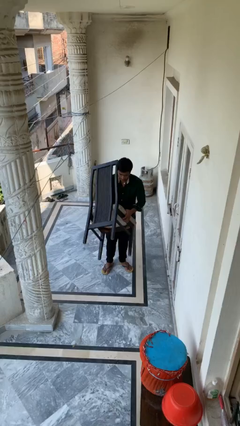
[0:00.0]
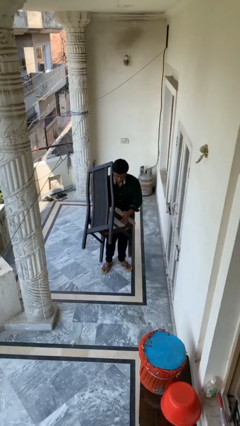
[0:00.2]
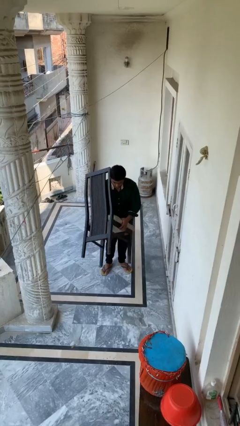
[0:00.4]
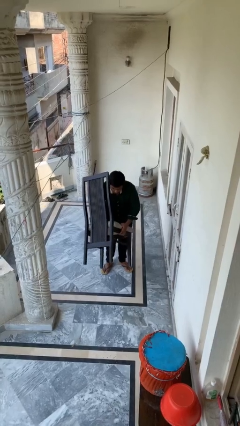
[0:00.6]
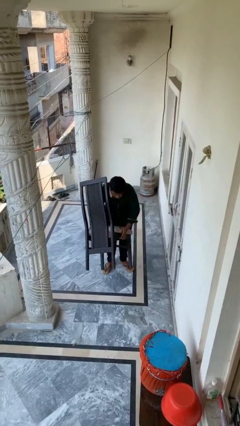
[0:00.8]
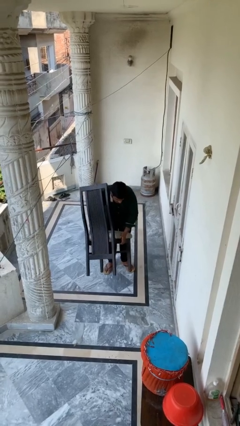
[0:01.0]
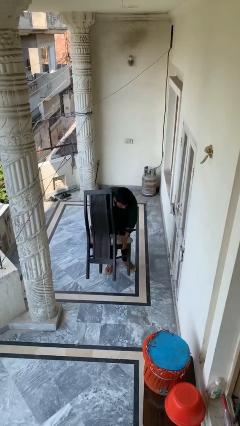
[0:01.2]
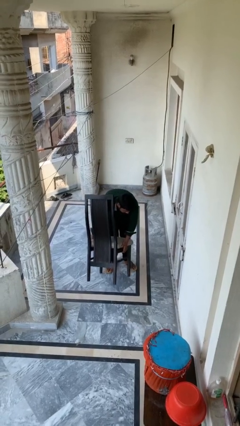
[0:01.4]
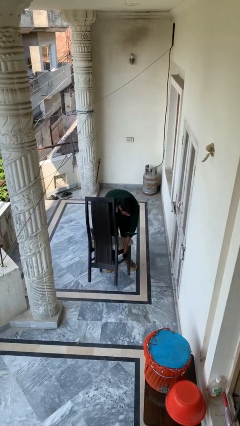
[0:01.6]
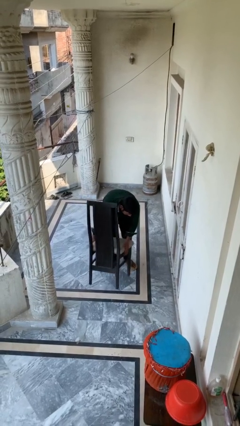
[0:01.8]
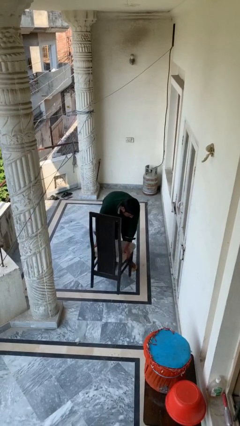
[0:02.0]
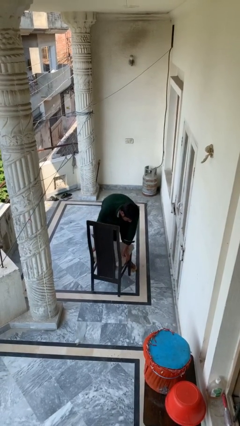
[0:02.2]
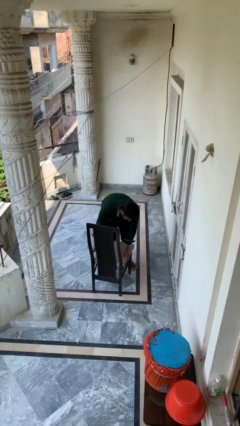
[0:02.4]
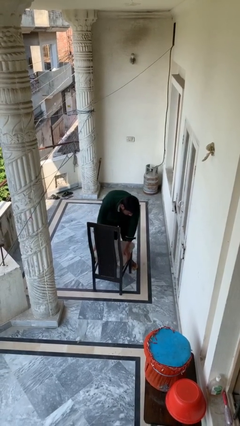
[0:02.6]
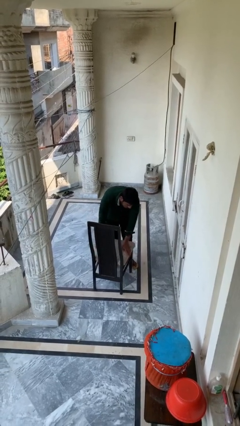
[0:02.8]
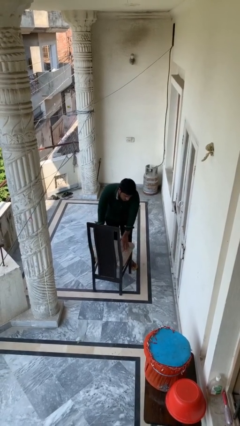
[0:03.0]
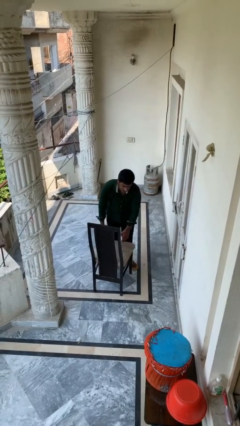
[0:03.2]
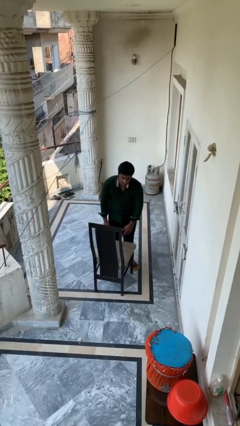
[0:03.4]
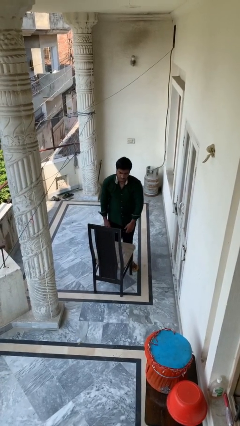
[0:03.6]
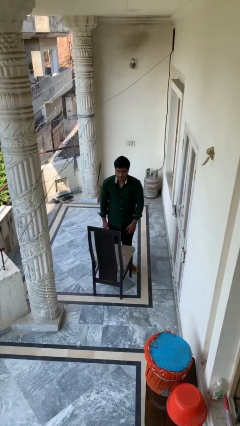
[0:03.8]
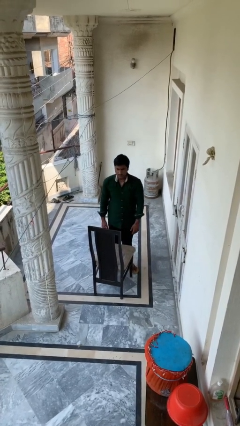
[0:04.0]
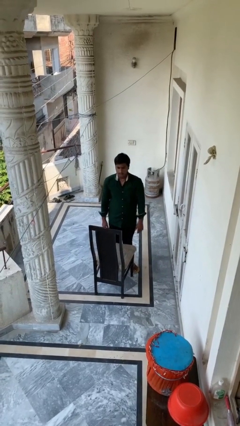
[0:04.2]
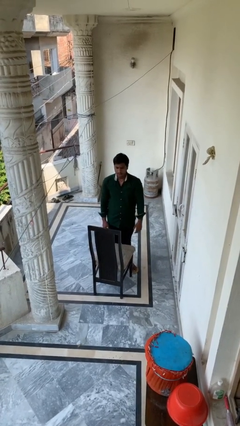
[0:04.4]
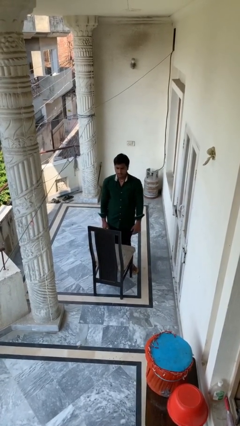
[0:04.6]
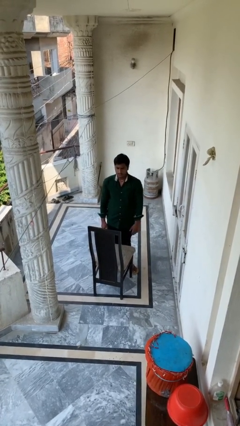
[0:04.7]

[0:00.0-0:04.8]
person puts down object on floor

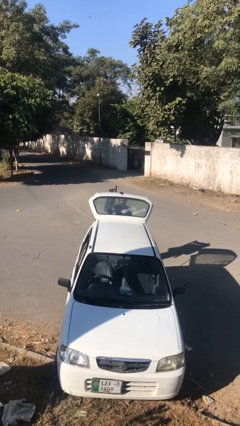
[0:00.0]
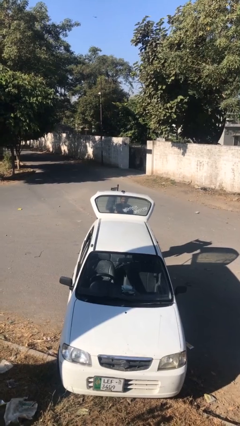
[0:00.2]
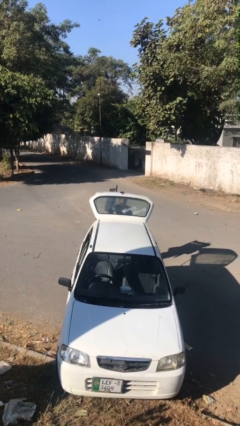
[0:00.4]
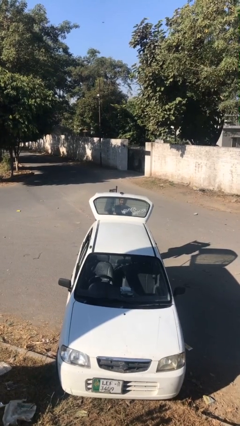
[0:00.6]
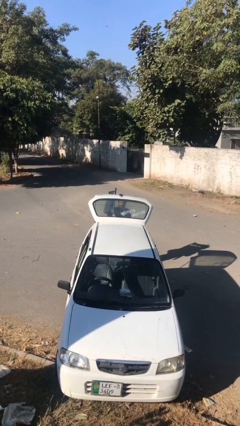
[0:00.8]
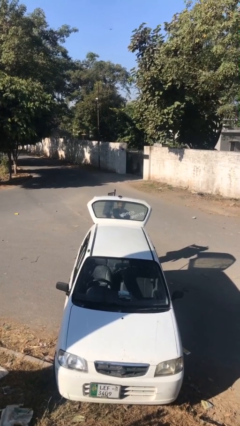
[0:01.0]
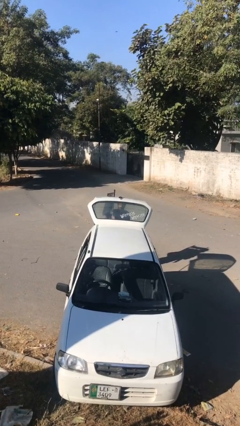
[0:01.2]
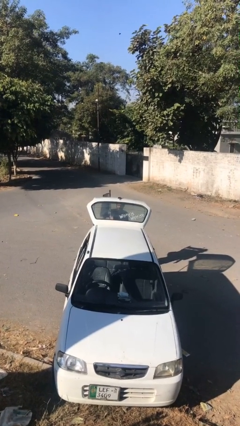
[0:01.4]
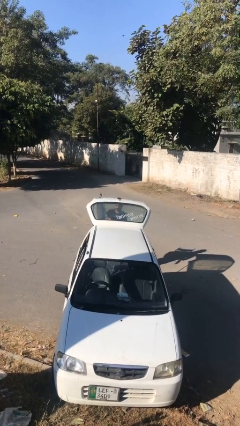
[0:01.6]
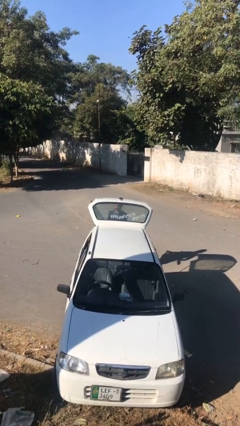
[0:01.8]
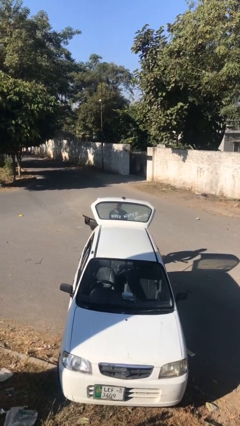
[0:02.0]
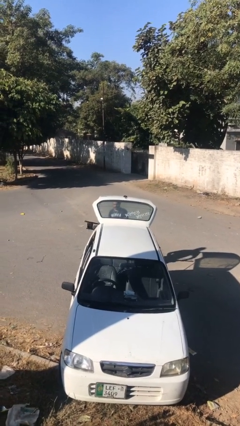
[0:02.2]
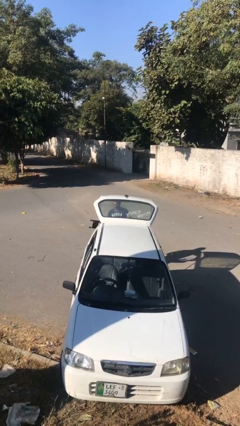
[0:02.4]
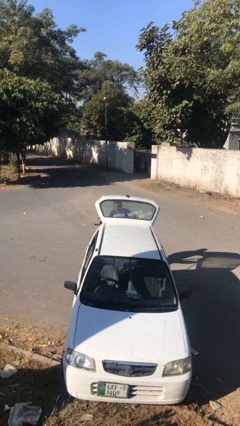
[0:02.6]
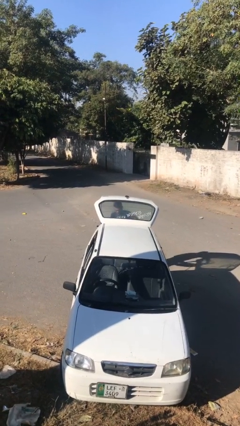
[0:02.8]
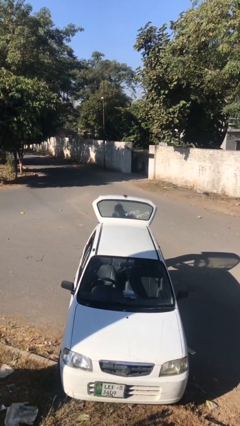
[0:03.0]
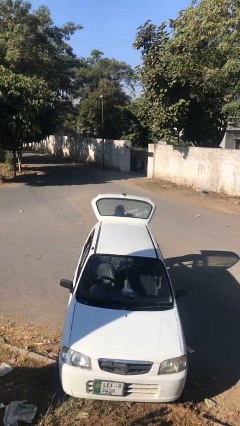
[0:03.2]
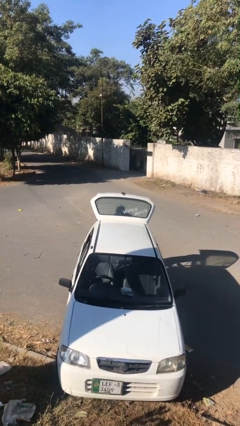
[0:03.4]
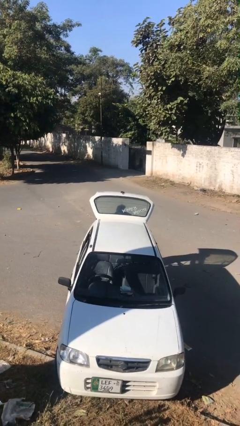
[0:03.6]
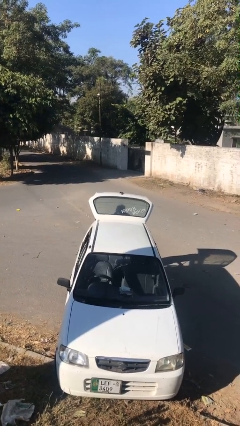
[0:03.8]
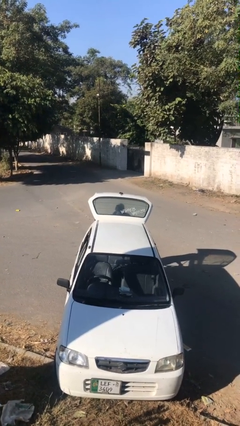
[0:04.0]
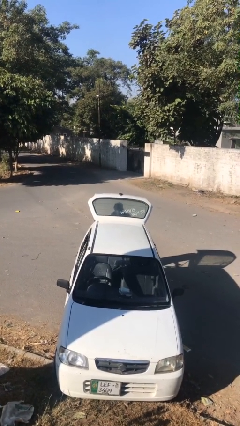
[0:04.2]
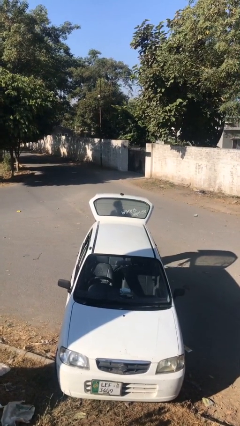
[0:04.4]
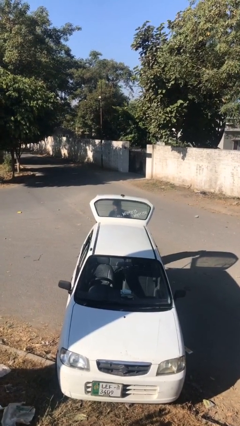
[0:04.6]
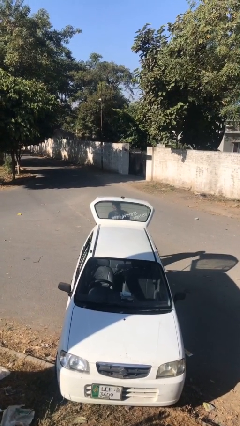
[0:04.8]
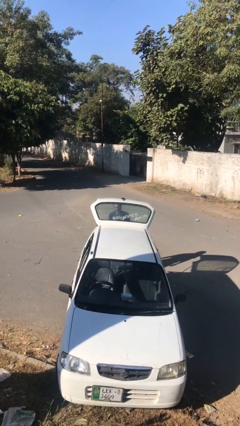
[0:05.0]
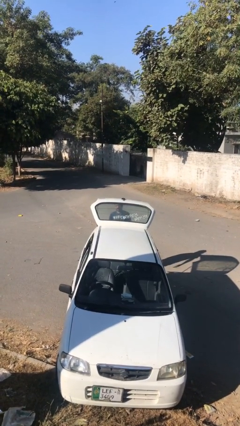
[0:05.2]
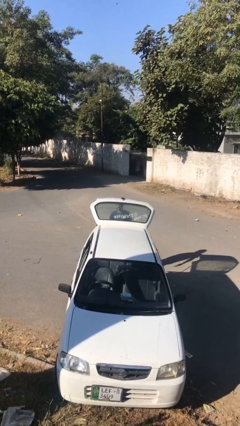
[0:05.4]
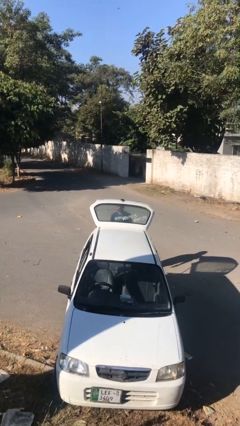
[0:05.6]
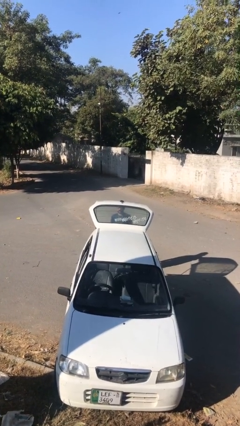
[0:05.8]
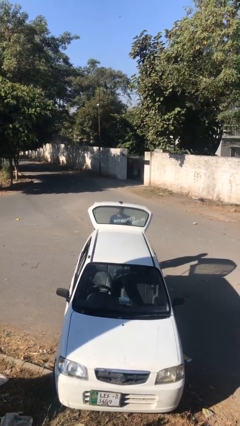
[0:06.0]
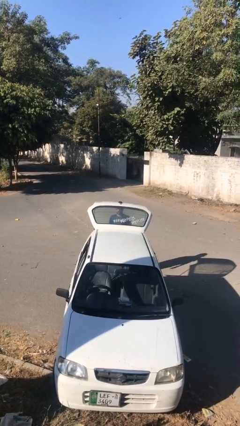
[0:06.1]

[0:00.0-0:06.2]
person loads car

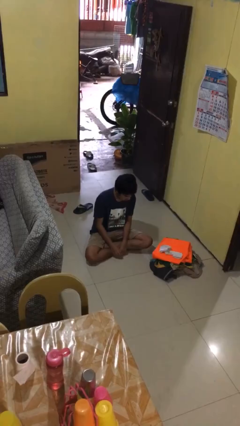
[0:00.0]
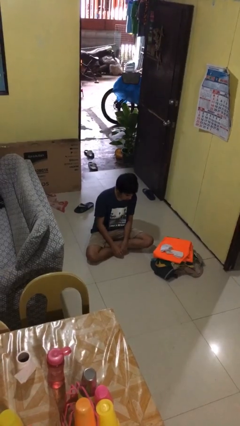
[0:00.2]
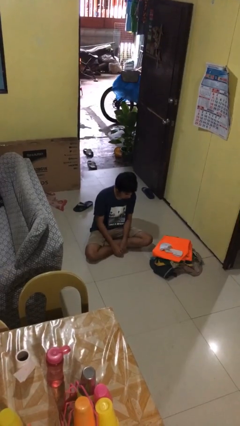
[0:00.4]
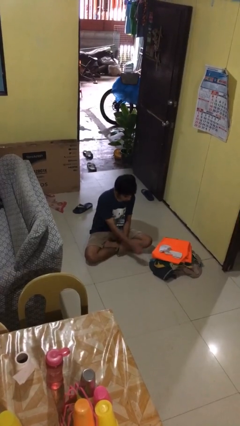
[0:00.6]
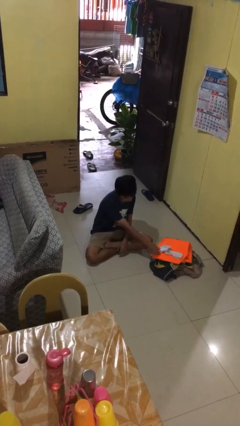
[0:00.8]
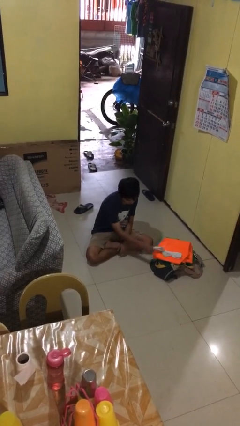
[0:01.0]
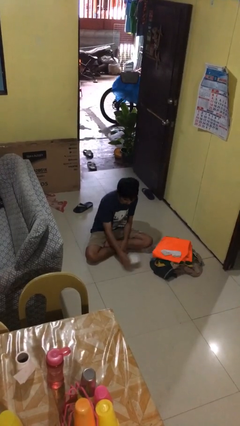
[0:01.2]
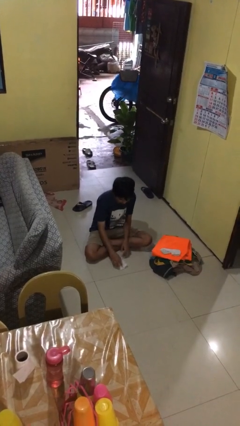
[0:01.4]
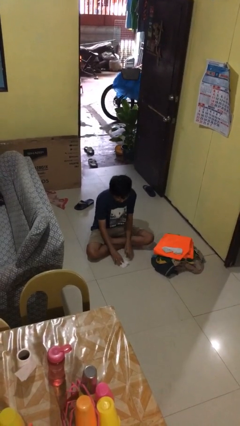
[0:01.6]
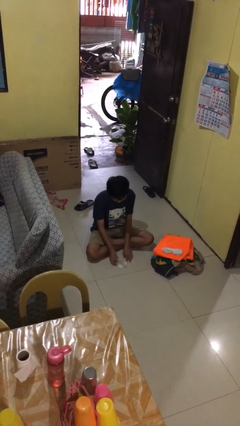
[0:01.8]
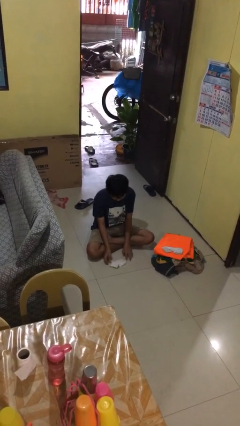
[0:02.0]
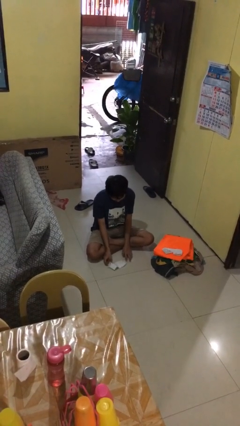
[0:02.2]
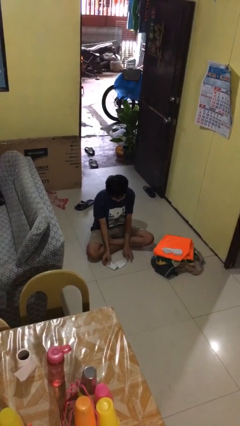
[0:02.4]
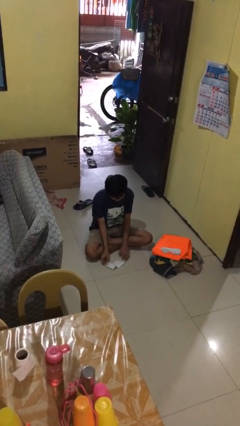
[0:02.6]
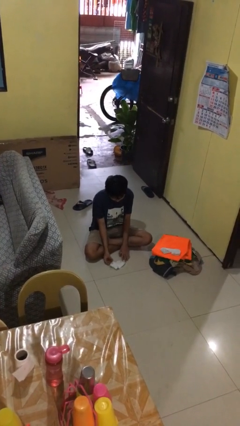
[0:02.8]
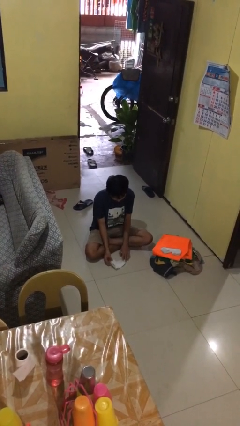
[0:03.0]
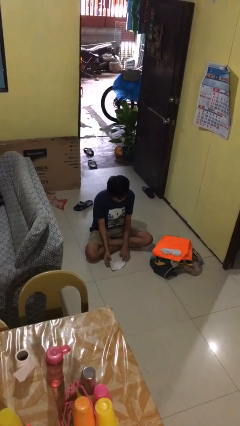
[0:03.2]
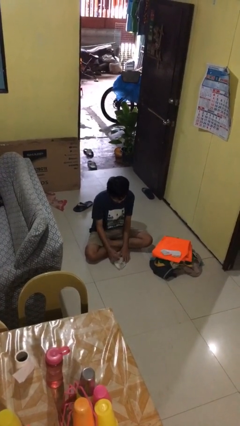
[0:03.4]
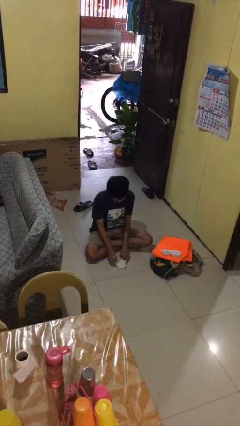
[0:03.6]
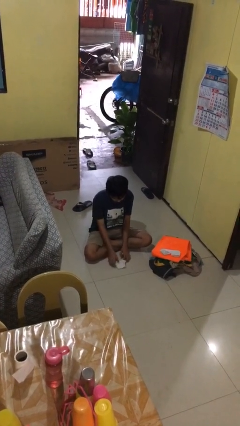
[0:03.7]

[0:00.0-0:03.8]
person folds socks

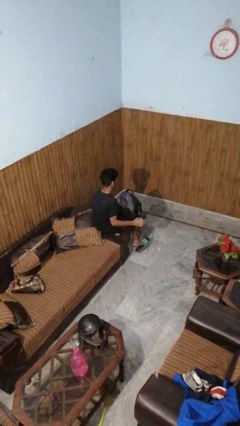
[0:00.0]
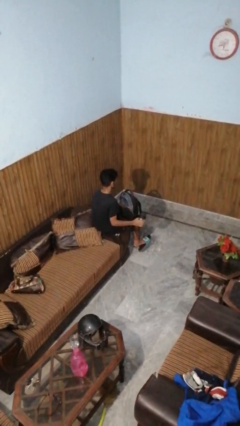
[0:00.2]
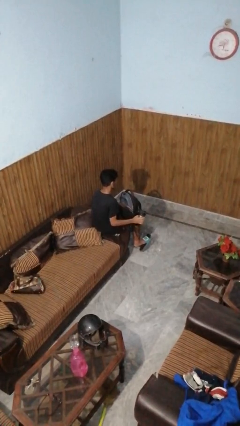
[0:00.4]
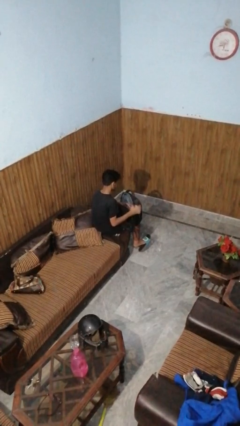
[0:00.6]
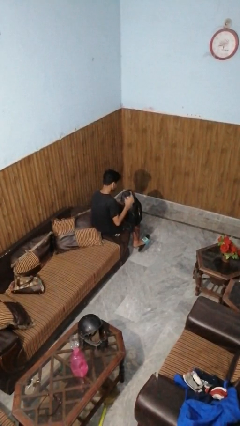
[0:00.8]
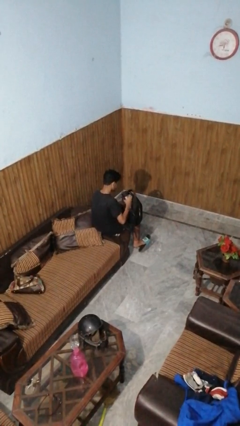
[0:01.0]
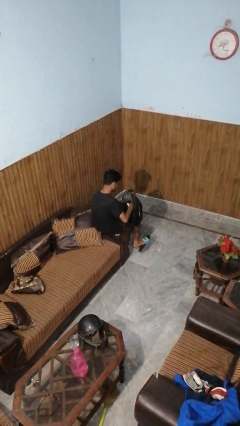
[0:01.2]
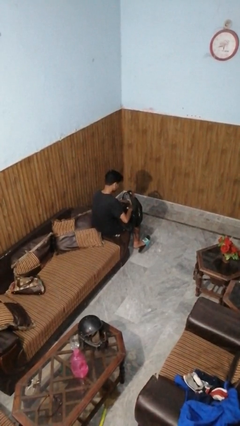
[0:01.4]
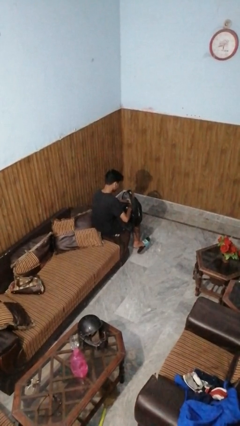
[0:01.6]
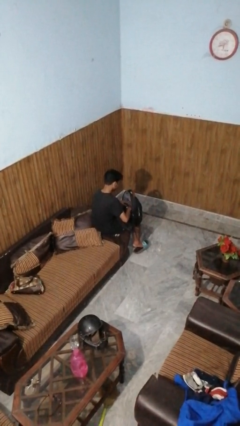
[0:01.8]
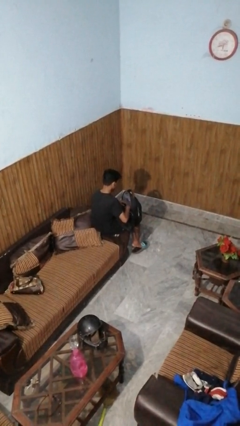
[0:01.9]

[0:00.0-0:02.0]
person puts object into backpack

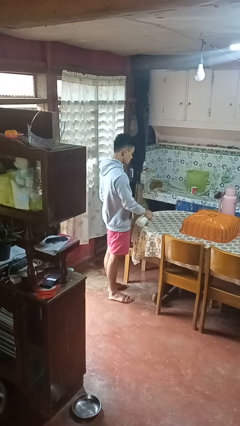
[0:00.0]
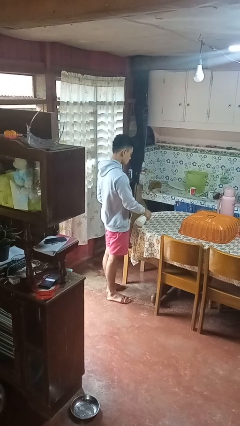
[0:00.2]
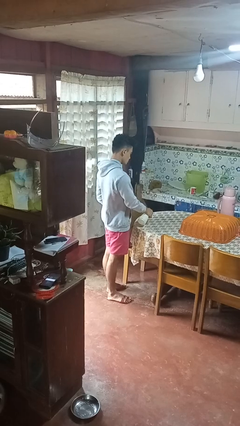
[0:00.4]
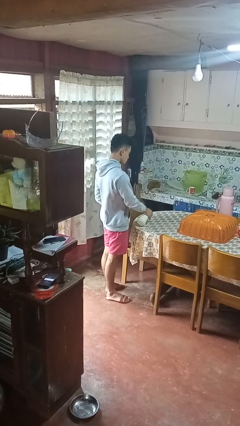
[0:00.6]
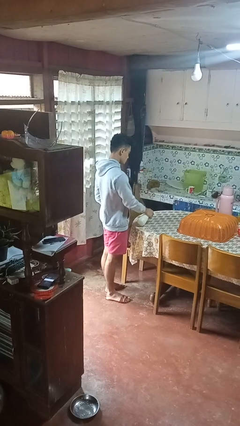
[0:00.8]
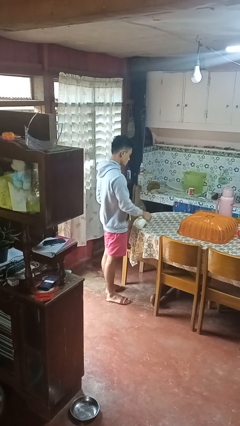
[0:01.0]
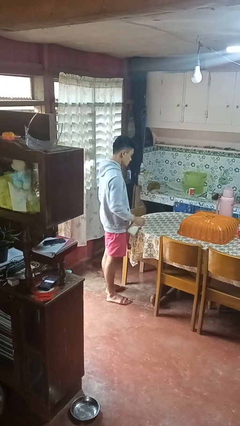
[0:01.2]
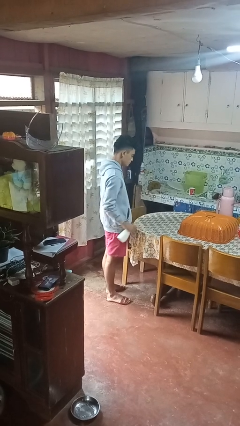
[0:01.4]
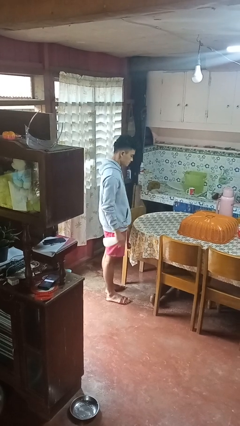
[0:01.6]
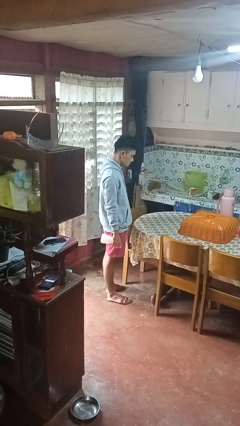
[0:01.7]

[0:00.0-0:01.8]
person sprays from bottle
